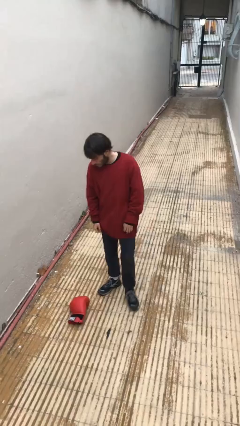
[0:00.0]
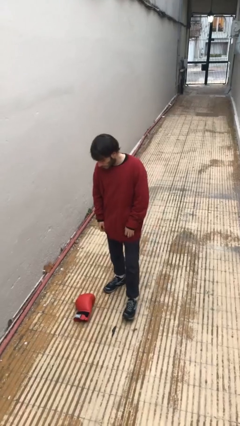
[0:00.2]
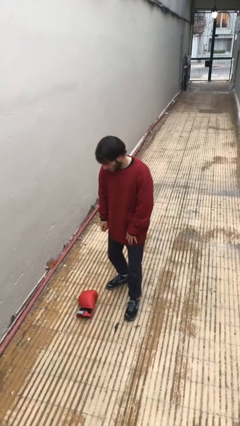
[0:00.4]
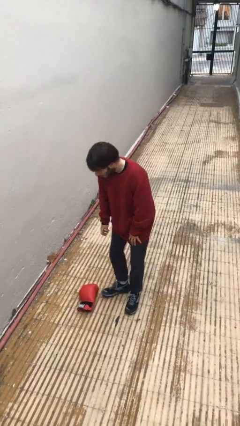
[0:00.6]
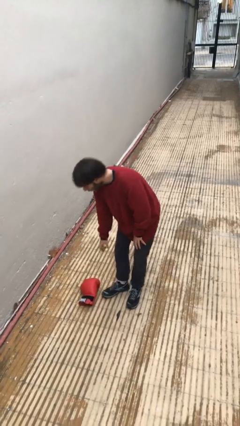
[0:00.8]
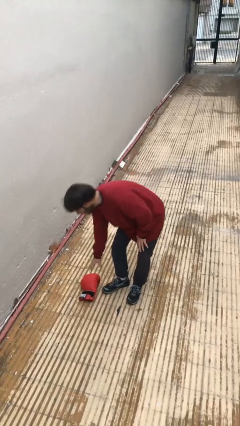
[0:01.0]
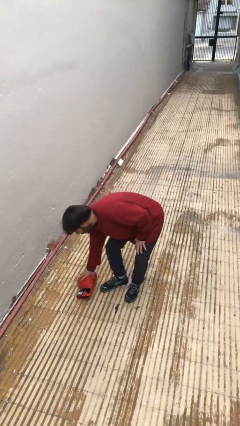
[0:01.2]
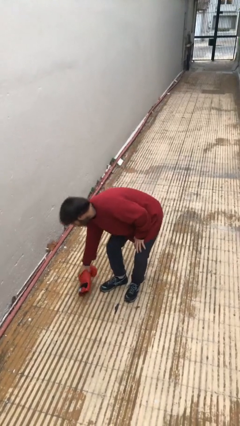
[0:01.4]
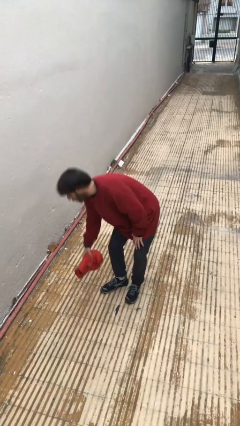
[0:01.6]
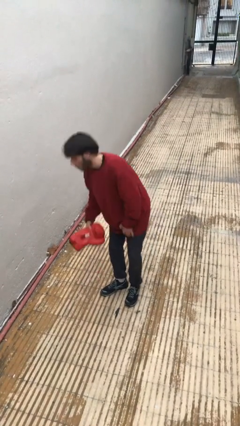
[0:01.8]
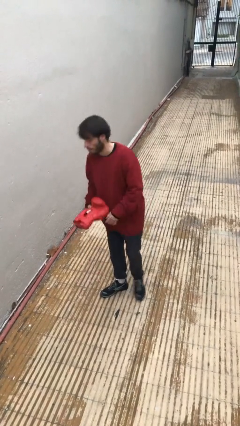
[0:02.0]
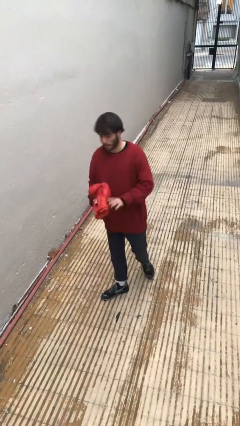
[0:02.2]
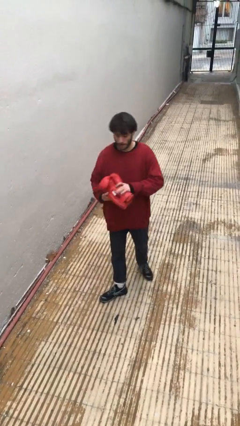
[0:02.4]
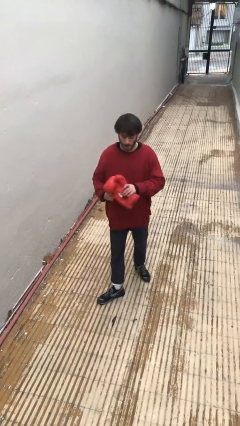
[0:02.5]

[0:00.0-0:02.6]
person picks up object from floor

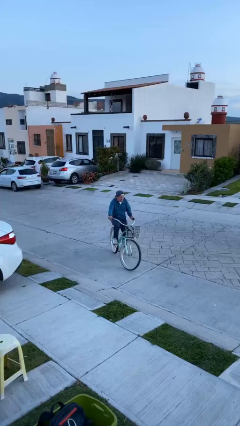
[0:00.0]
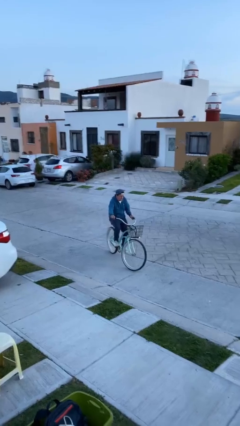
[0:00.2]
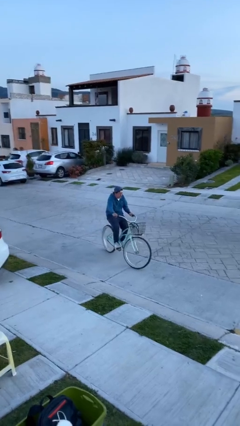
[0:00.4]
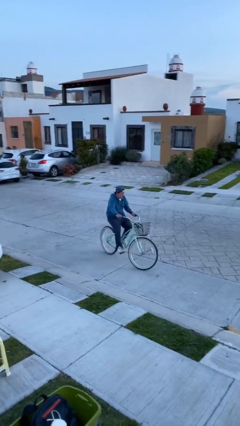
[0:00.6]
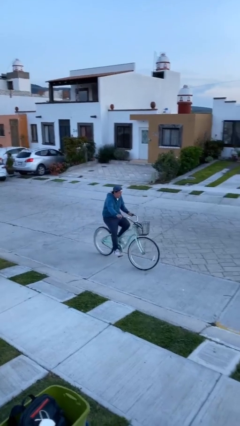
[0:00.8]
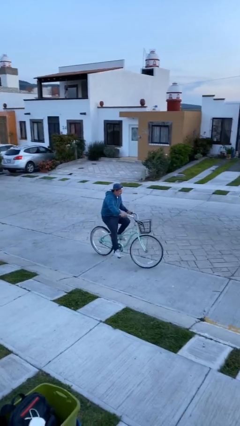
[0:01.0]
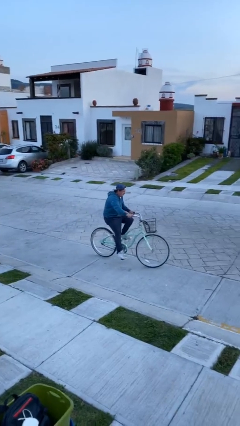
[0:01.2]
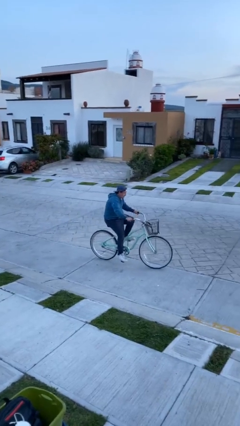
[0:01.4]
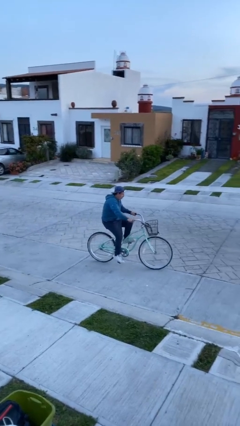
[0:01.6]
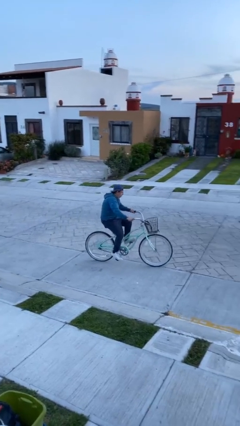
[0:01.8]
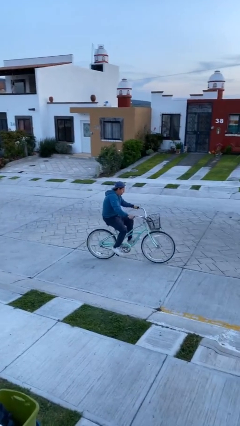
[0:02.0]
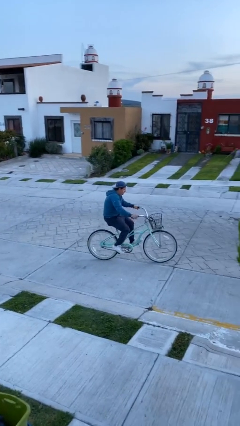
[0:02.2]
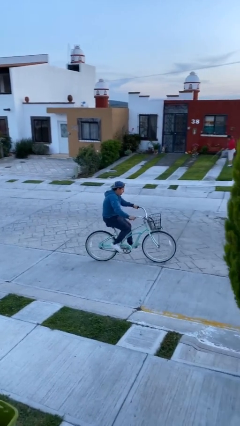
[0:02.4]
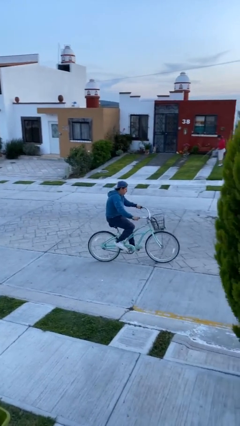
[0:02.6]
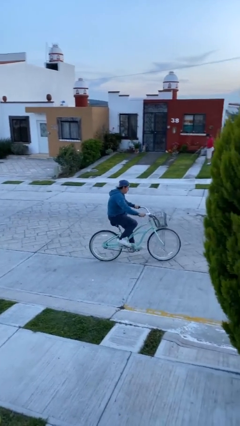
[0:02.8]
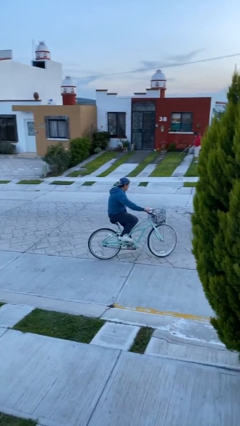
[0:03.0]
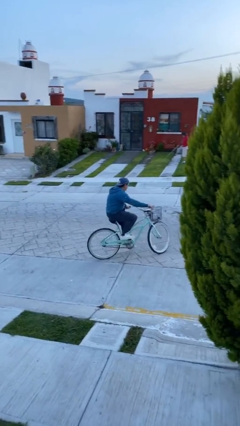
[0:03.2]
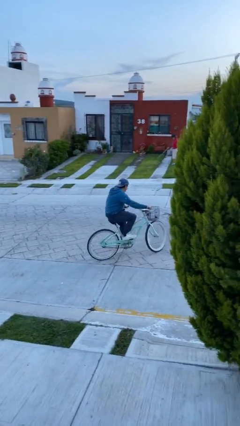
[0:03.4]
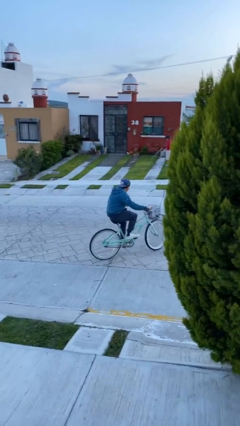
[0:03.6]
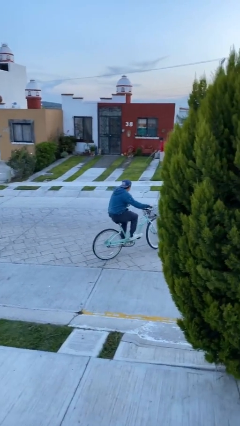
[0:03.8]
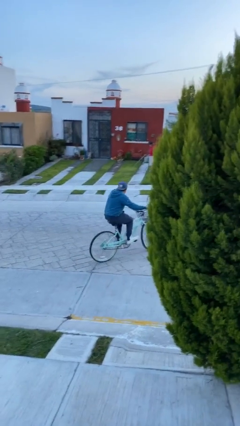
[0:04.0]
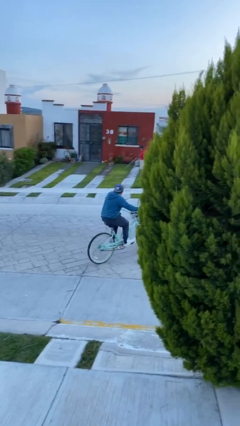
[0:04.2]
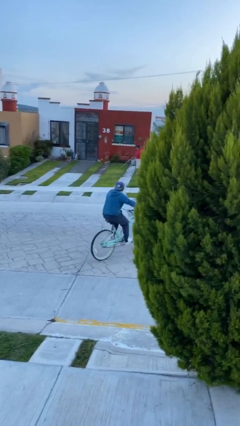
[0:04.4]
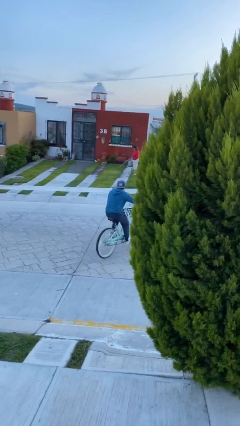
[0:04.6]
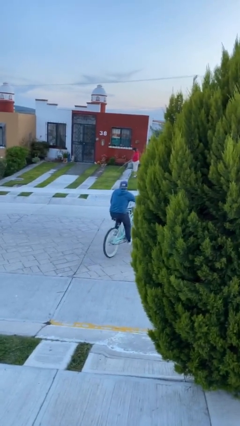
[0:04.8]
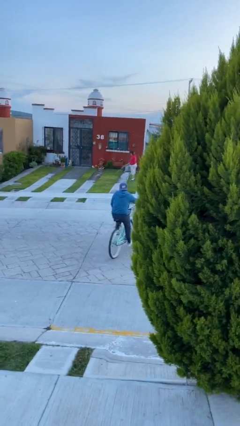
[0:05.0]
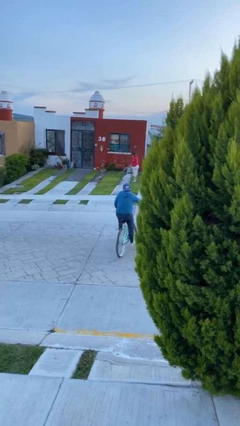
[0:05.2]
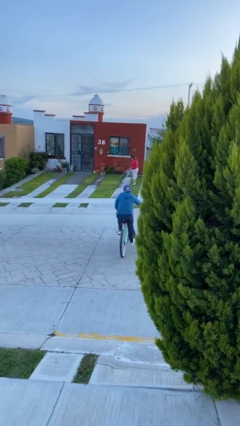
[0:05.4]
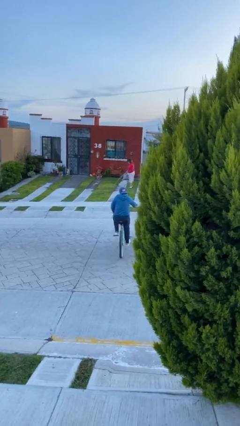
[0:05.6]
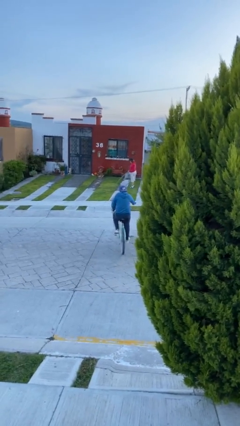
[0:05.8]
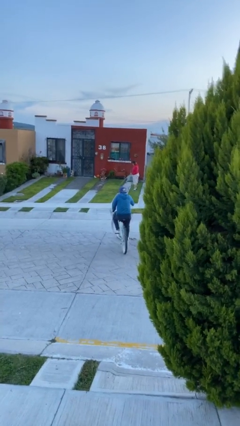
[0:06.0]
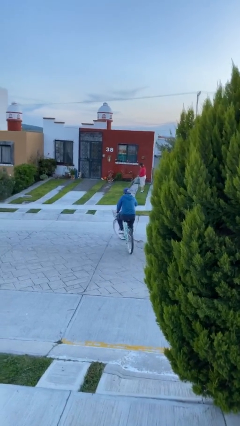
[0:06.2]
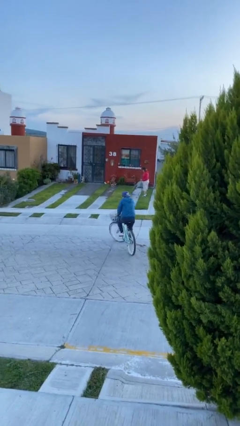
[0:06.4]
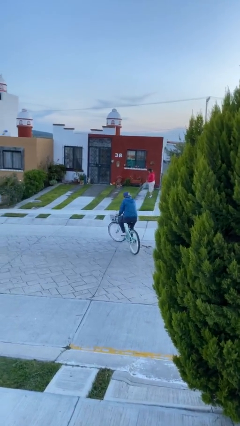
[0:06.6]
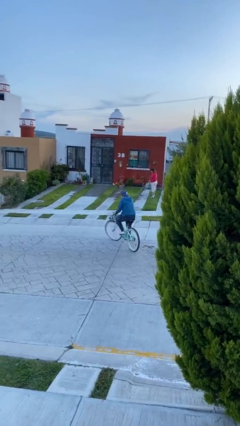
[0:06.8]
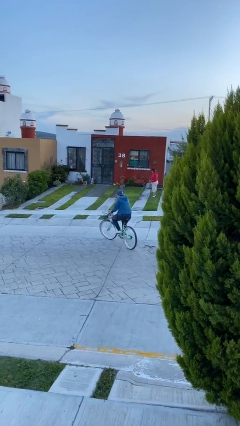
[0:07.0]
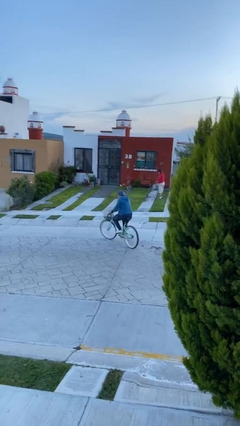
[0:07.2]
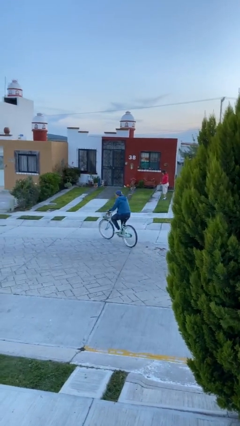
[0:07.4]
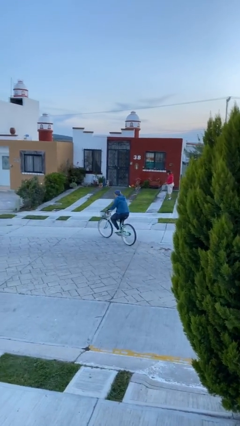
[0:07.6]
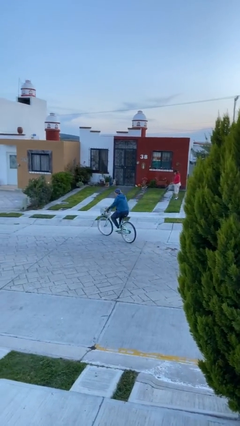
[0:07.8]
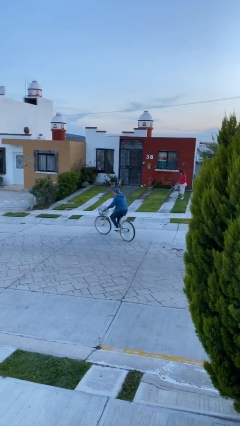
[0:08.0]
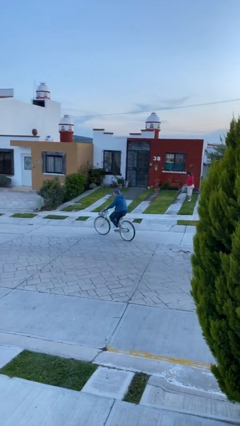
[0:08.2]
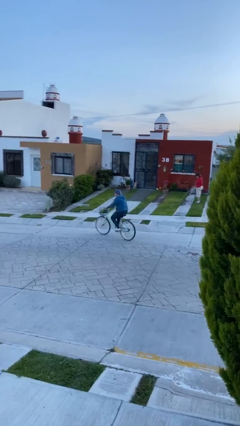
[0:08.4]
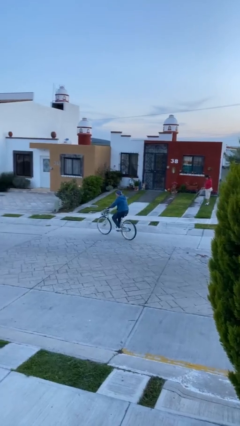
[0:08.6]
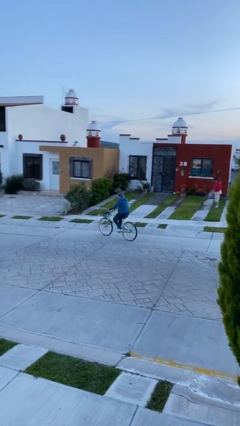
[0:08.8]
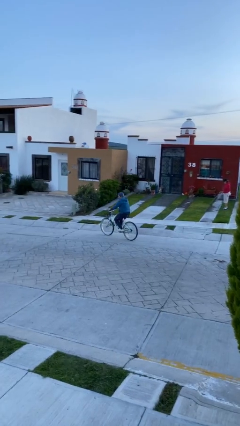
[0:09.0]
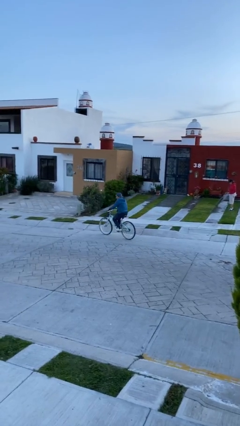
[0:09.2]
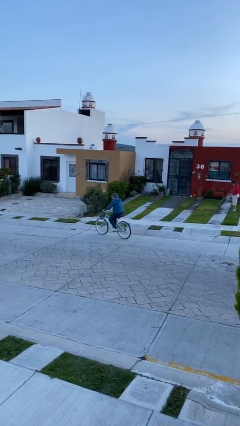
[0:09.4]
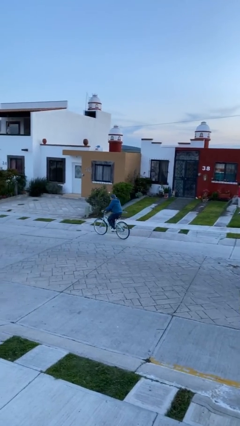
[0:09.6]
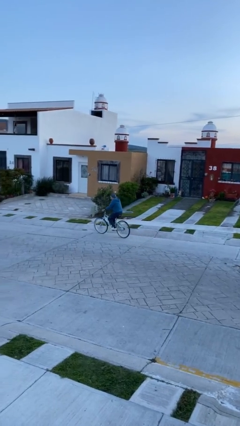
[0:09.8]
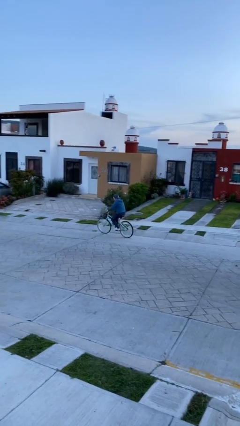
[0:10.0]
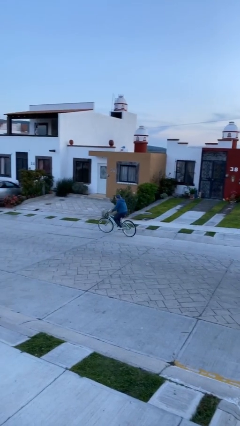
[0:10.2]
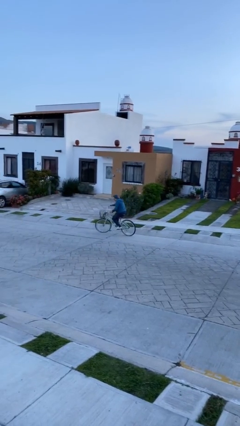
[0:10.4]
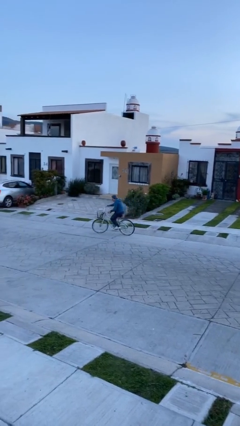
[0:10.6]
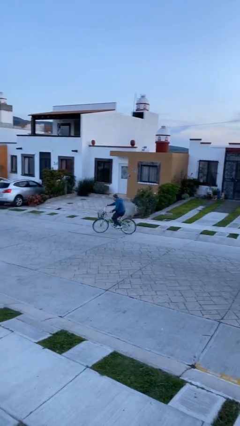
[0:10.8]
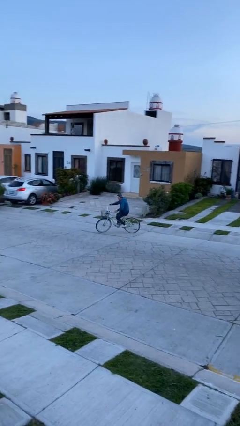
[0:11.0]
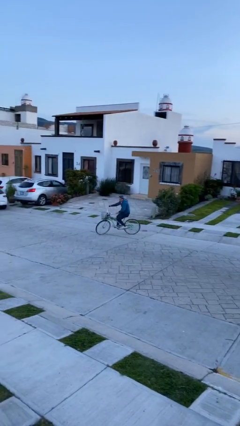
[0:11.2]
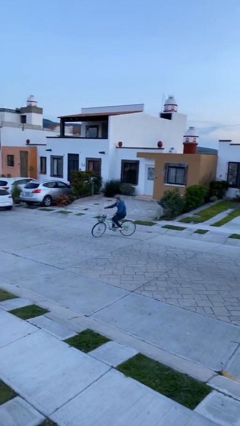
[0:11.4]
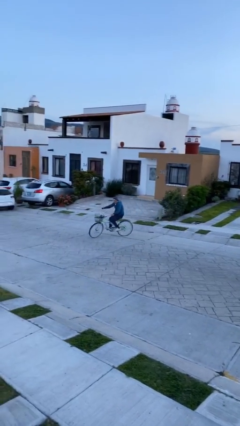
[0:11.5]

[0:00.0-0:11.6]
person rides bicycle

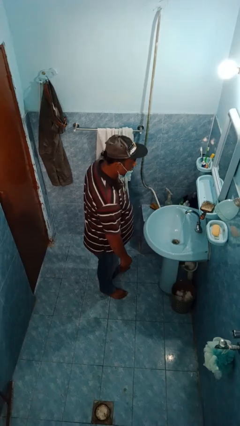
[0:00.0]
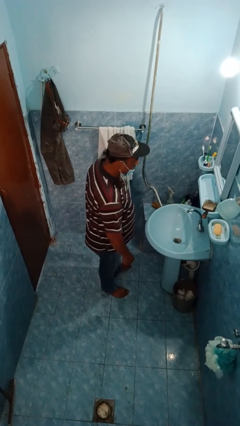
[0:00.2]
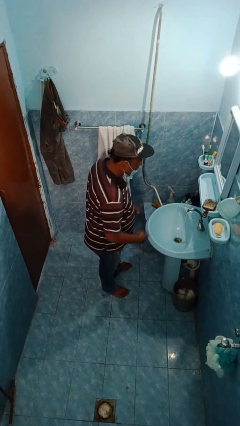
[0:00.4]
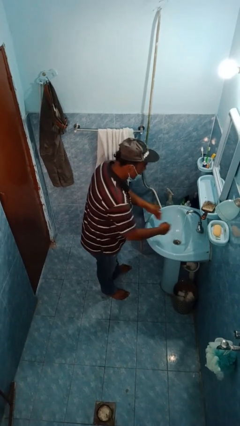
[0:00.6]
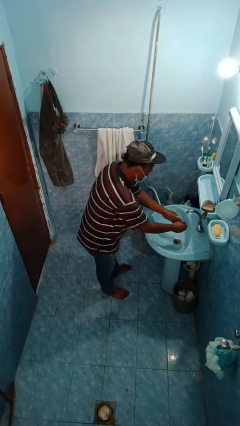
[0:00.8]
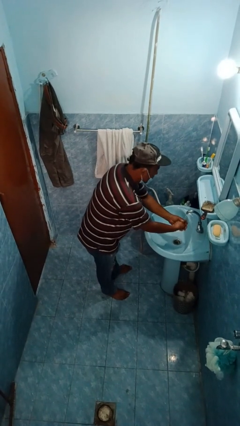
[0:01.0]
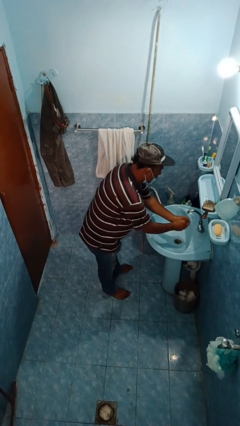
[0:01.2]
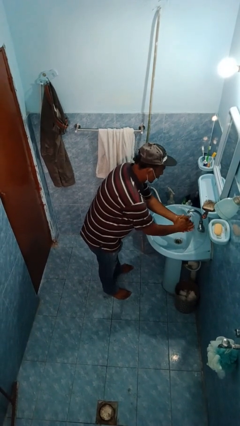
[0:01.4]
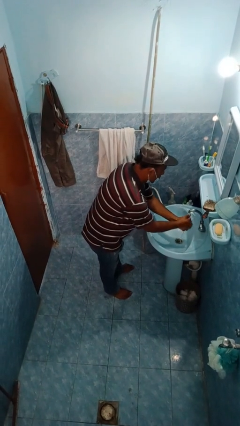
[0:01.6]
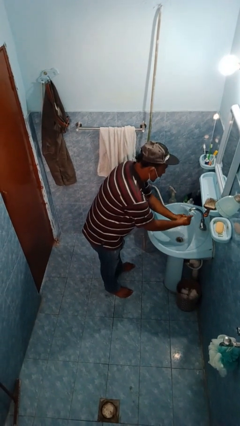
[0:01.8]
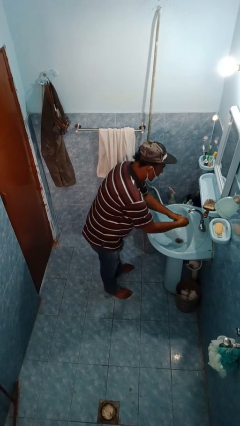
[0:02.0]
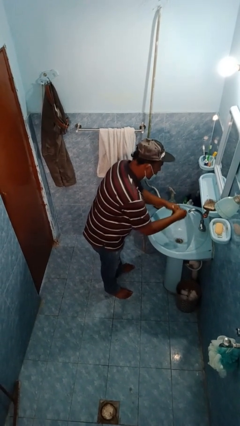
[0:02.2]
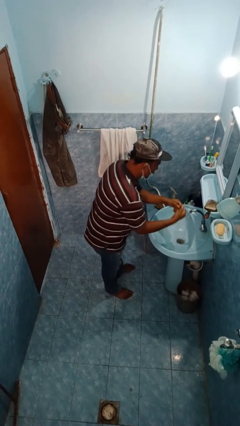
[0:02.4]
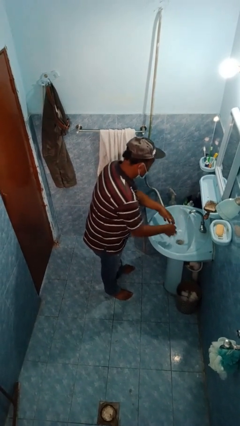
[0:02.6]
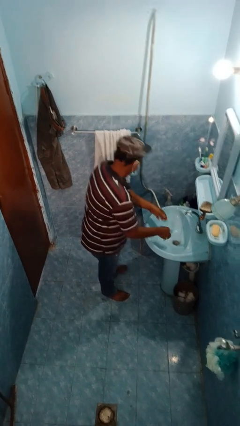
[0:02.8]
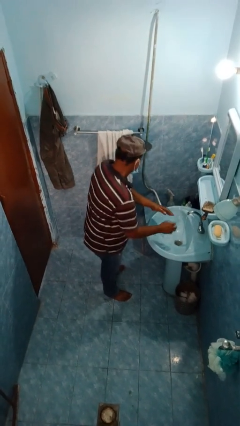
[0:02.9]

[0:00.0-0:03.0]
person washes hands

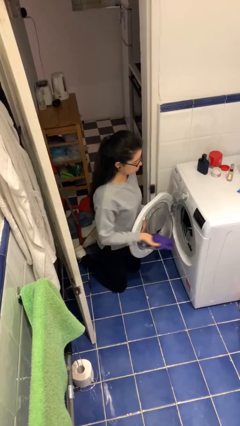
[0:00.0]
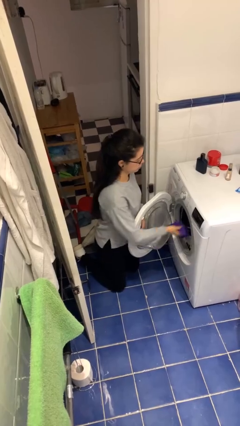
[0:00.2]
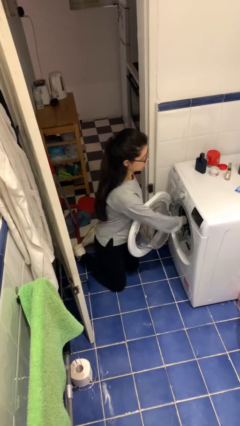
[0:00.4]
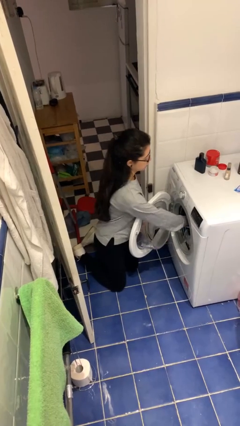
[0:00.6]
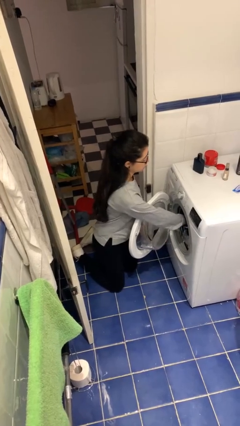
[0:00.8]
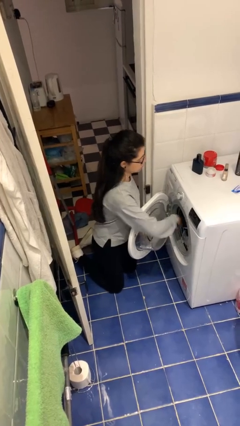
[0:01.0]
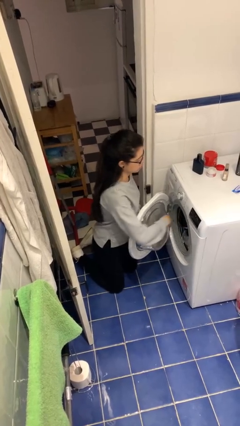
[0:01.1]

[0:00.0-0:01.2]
person loads clotheswasher
